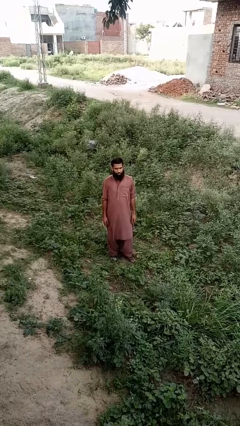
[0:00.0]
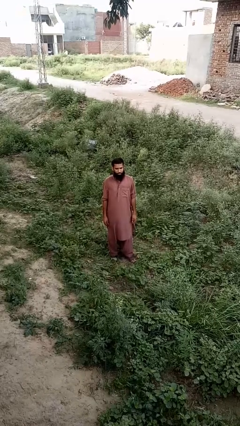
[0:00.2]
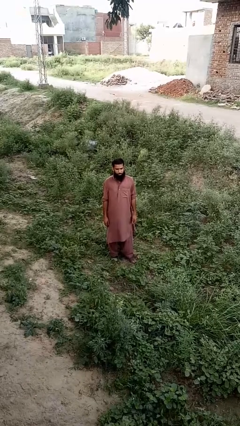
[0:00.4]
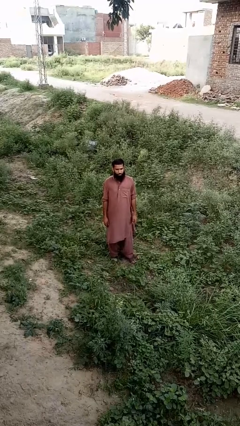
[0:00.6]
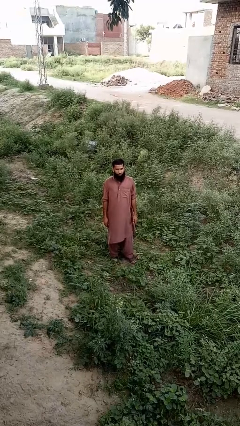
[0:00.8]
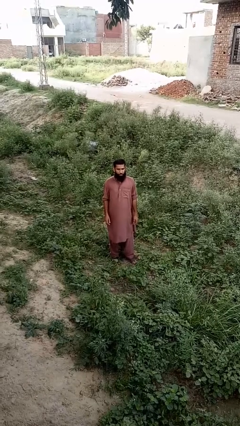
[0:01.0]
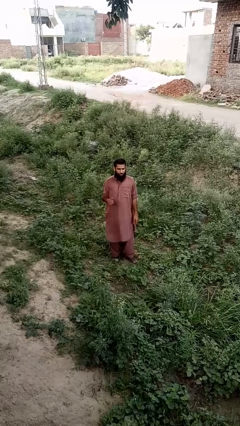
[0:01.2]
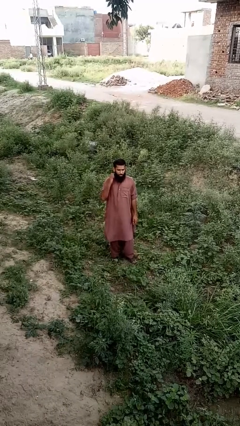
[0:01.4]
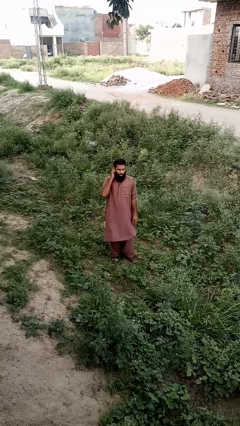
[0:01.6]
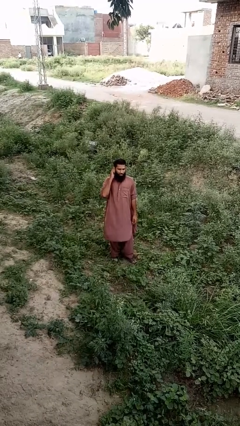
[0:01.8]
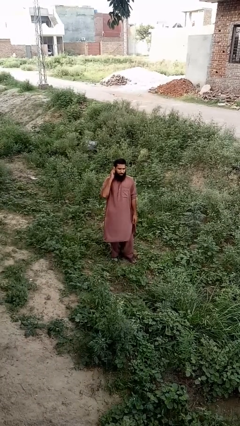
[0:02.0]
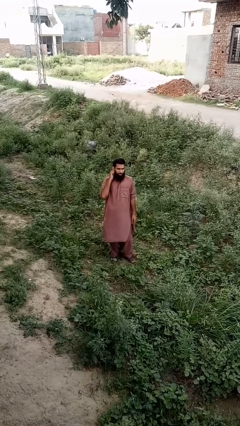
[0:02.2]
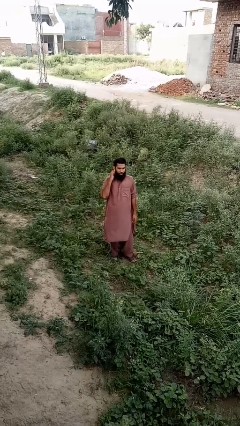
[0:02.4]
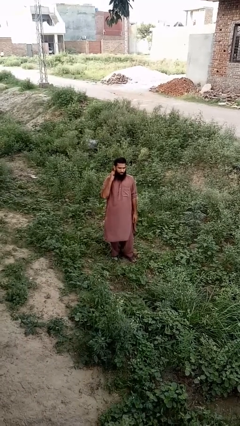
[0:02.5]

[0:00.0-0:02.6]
person touches earlobe

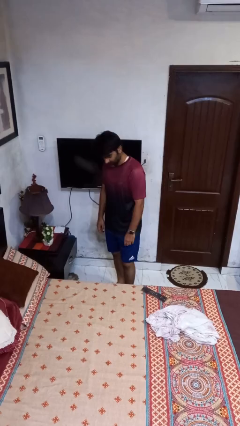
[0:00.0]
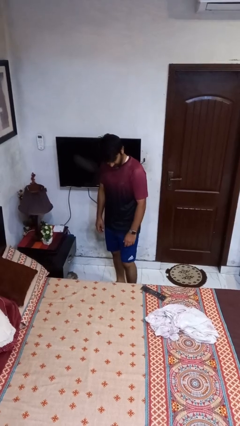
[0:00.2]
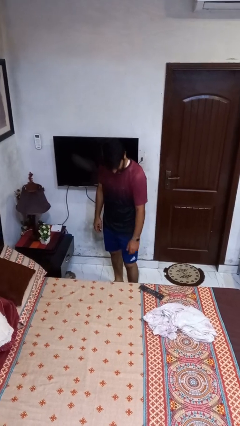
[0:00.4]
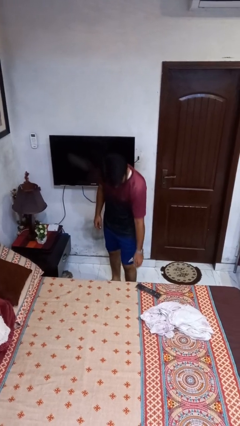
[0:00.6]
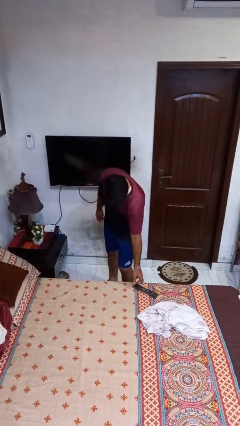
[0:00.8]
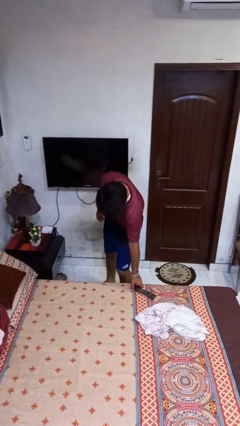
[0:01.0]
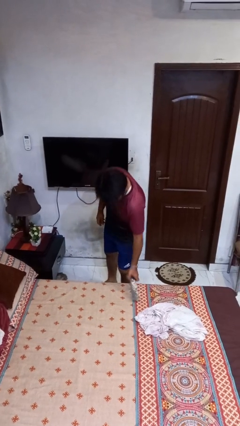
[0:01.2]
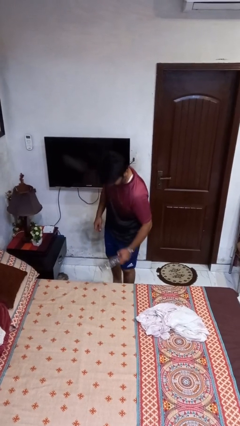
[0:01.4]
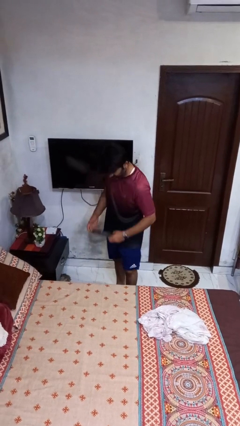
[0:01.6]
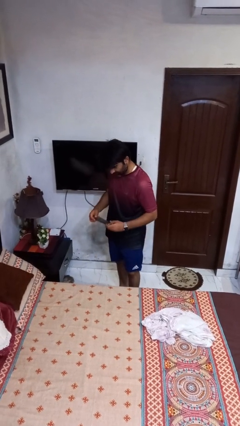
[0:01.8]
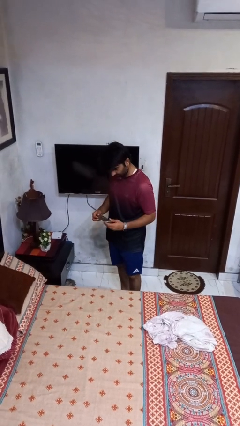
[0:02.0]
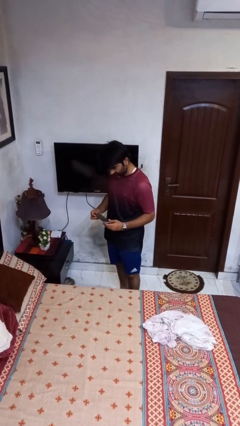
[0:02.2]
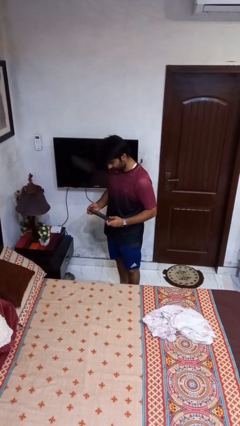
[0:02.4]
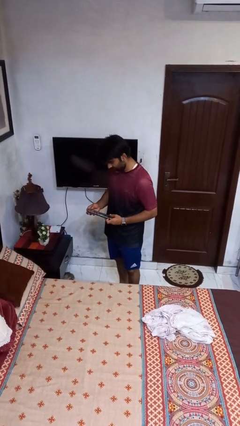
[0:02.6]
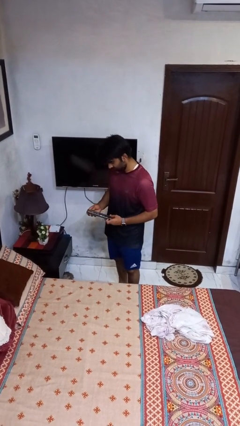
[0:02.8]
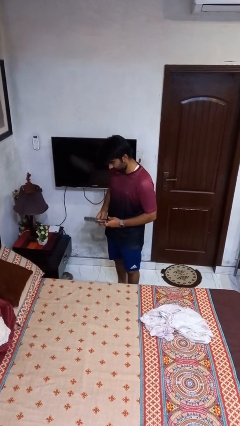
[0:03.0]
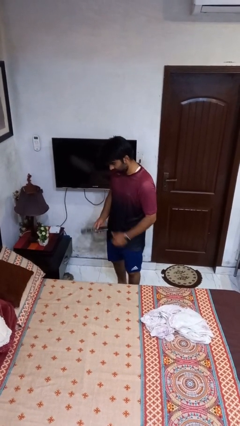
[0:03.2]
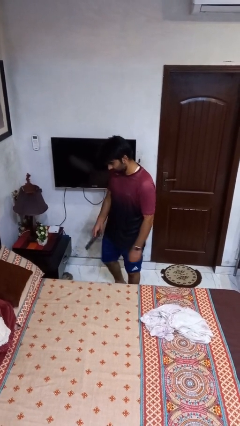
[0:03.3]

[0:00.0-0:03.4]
person picks up object from bed

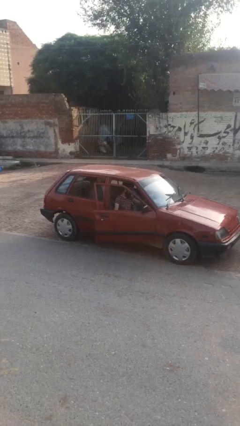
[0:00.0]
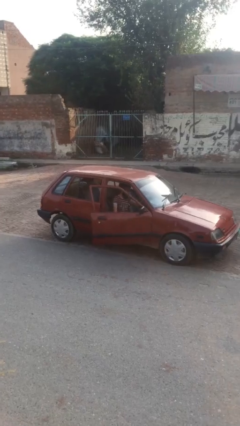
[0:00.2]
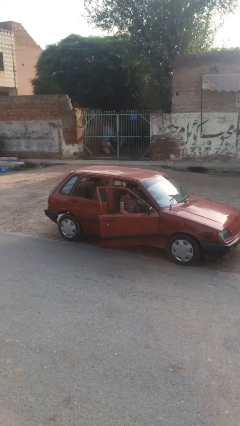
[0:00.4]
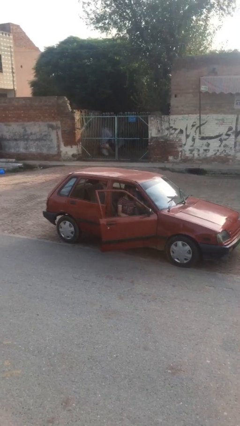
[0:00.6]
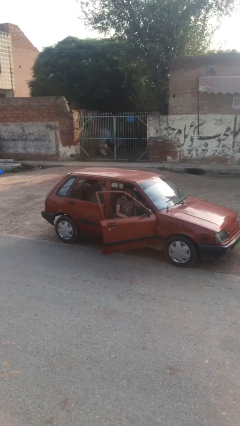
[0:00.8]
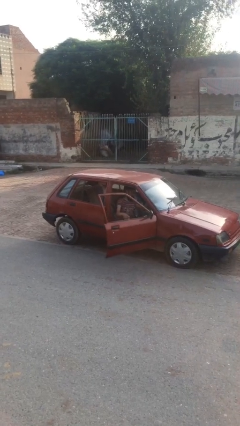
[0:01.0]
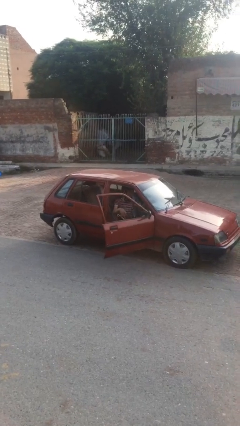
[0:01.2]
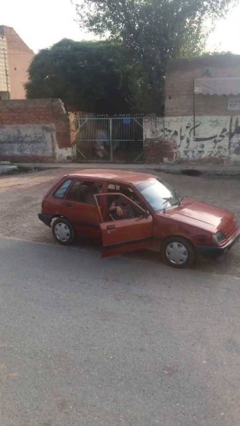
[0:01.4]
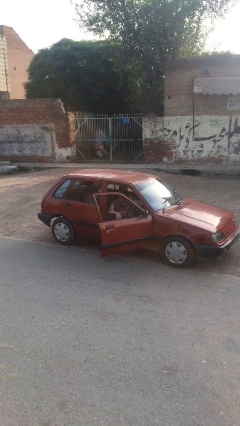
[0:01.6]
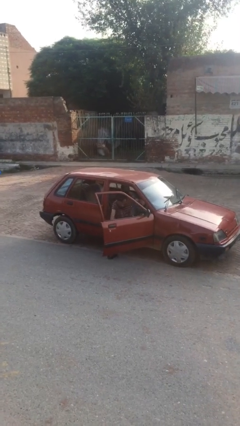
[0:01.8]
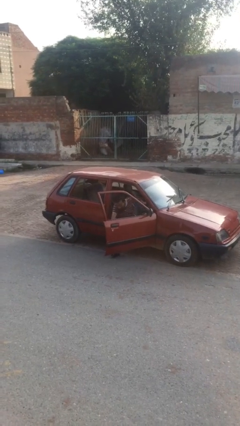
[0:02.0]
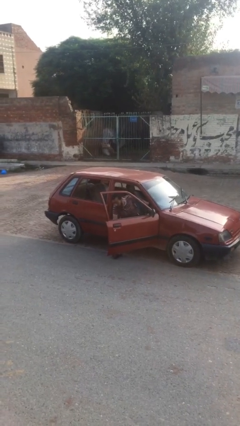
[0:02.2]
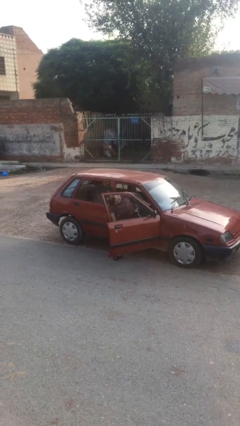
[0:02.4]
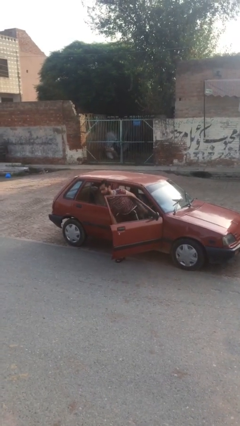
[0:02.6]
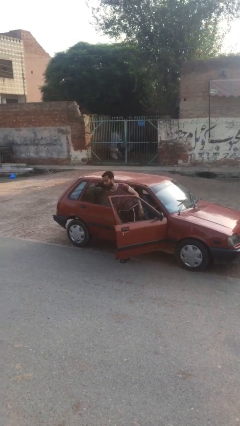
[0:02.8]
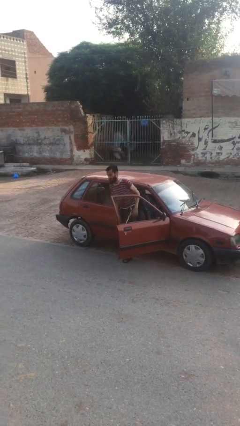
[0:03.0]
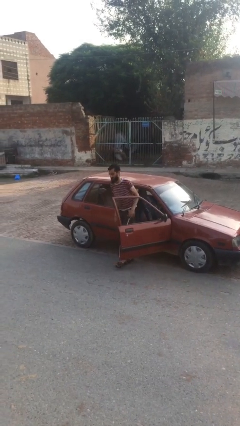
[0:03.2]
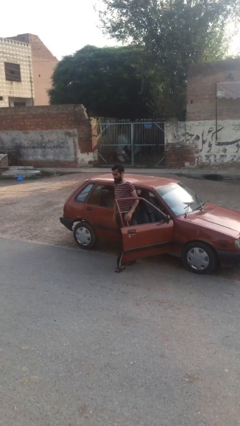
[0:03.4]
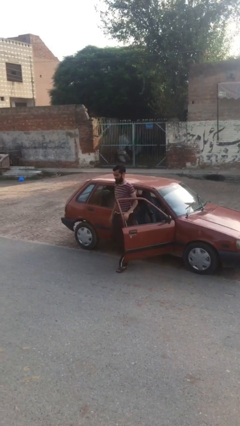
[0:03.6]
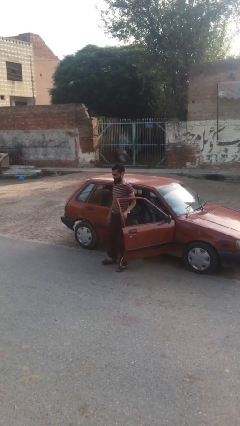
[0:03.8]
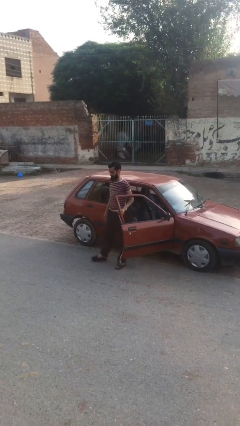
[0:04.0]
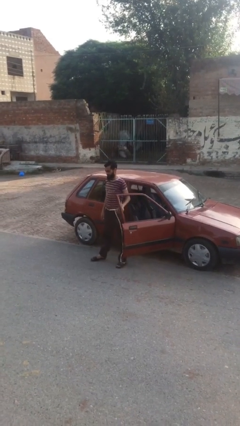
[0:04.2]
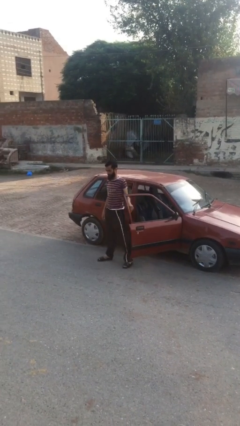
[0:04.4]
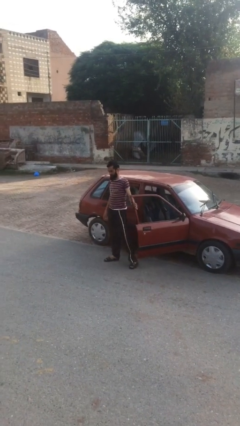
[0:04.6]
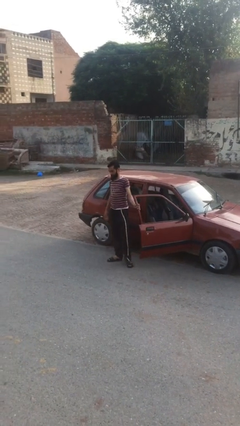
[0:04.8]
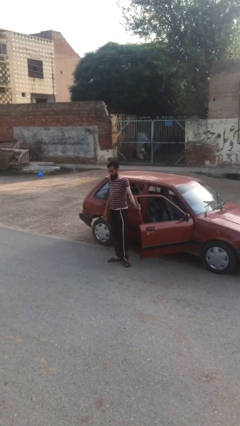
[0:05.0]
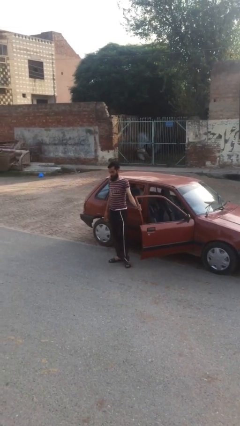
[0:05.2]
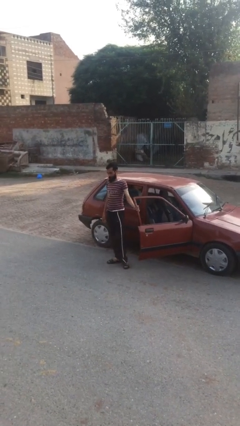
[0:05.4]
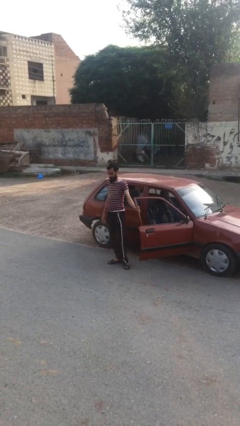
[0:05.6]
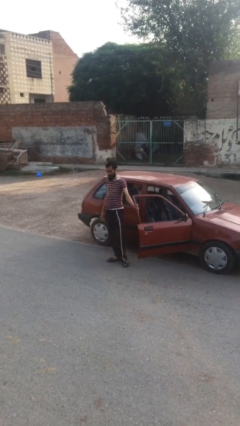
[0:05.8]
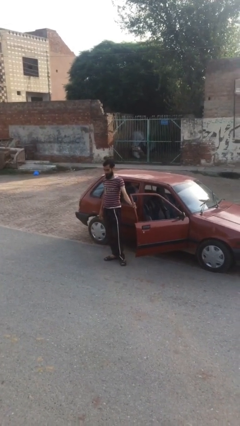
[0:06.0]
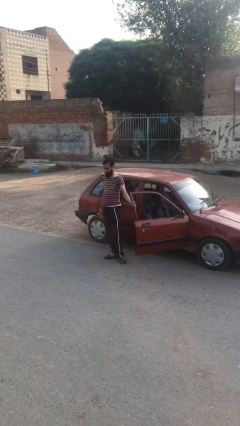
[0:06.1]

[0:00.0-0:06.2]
person exits car

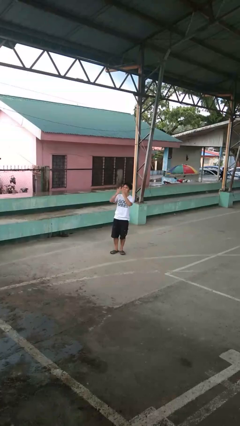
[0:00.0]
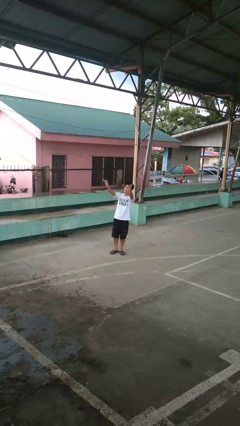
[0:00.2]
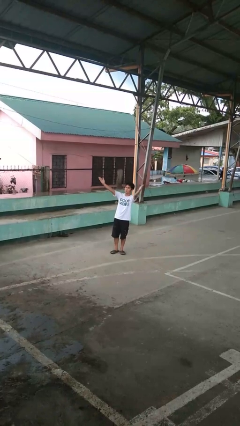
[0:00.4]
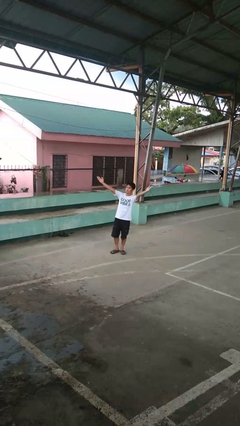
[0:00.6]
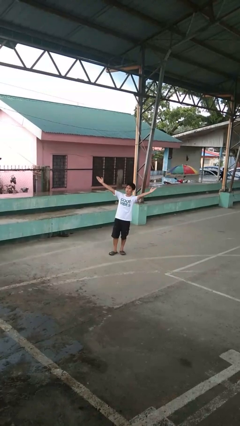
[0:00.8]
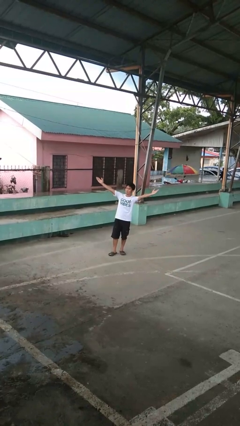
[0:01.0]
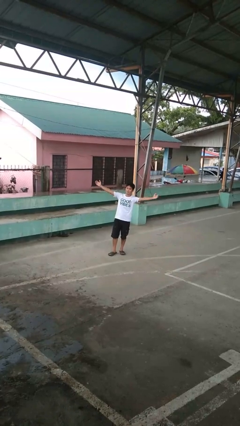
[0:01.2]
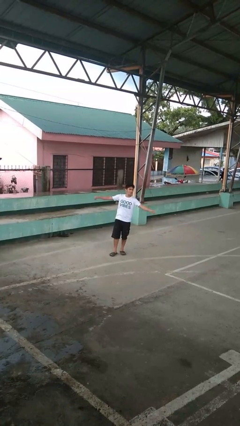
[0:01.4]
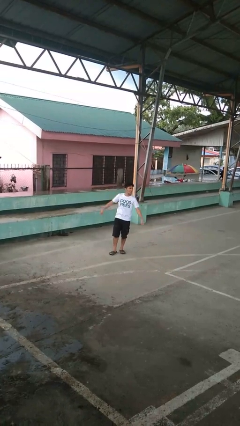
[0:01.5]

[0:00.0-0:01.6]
person gestures blow kiss

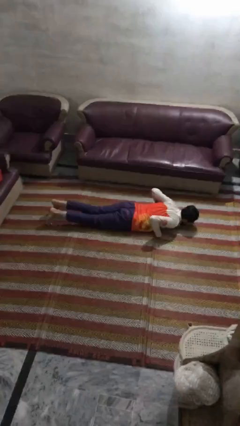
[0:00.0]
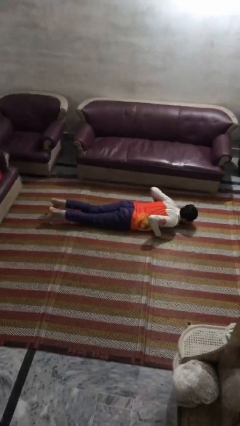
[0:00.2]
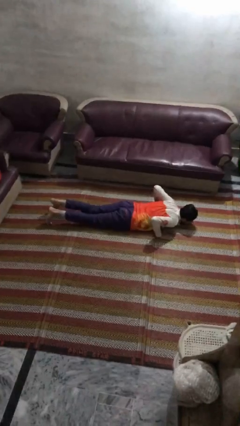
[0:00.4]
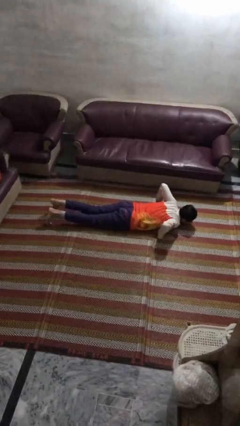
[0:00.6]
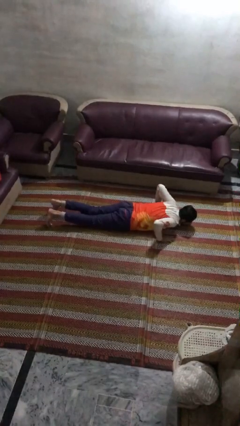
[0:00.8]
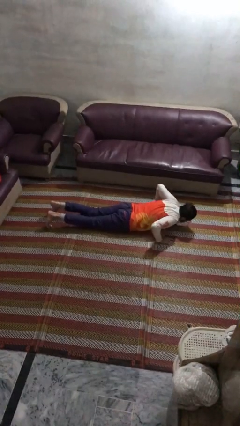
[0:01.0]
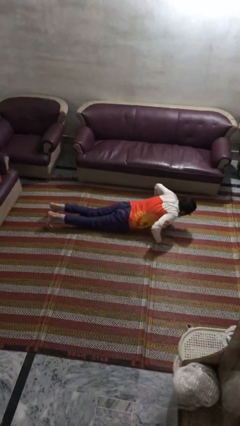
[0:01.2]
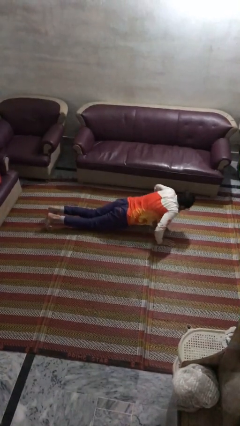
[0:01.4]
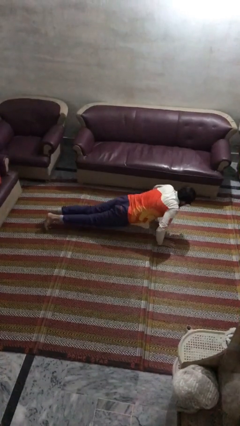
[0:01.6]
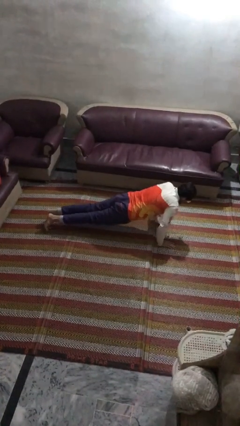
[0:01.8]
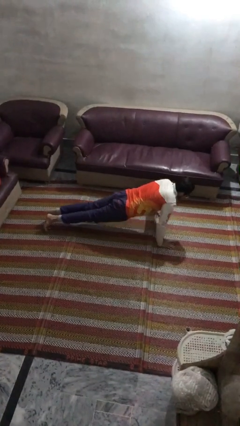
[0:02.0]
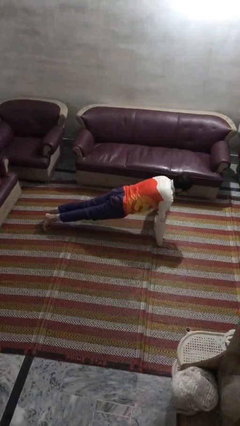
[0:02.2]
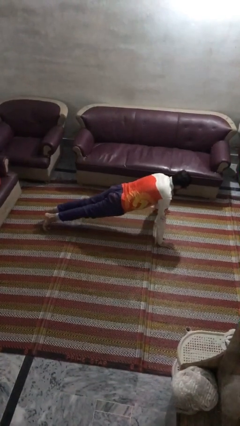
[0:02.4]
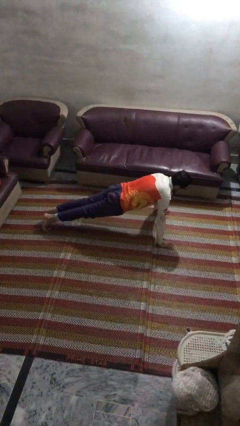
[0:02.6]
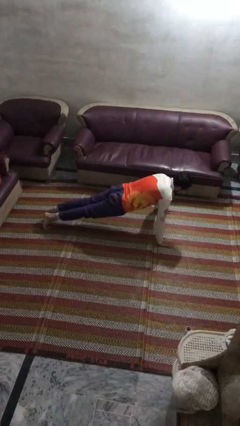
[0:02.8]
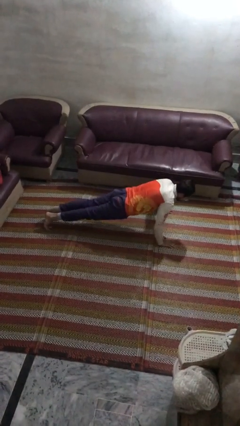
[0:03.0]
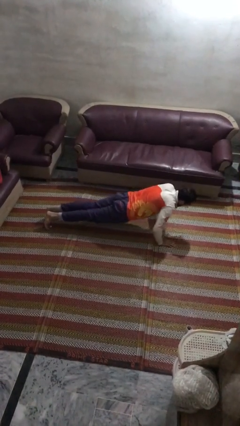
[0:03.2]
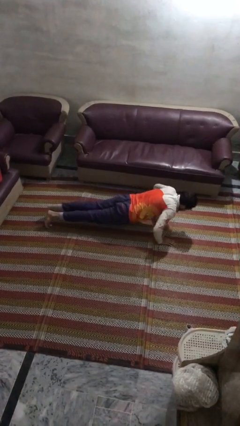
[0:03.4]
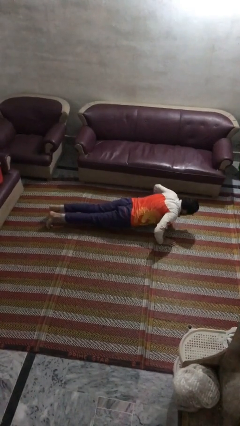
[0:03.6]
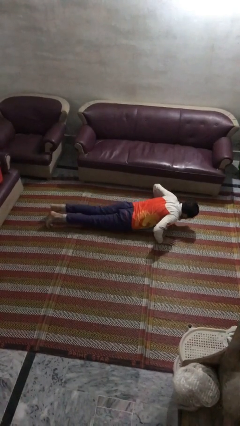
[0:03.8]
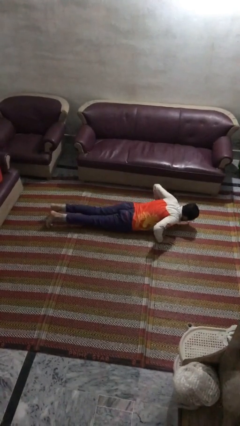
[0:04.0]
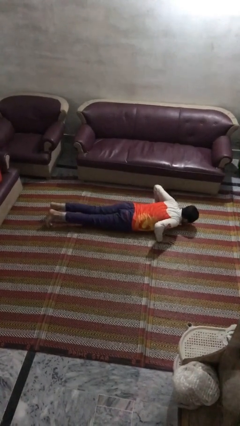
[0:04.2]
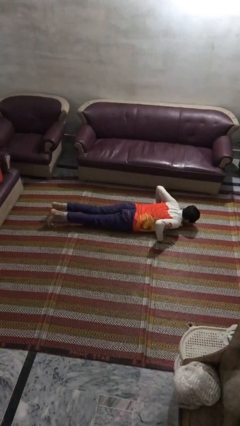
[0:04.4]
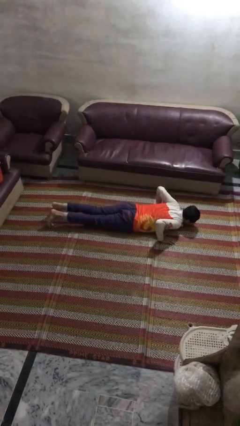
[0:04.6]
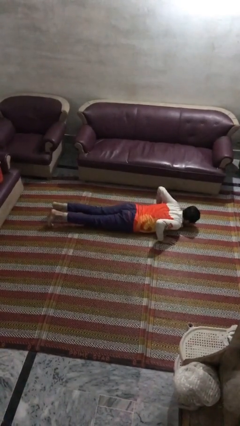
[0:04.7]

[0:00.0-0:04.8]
person exercises with pushup
